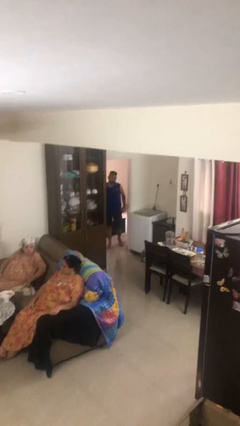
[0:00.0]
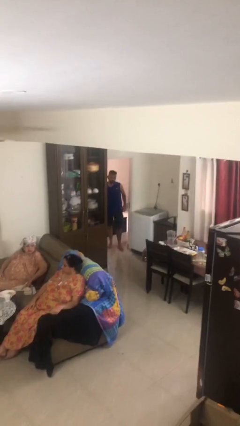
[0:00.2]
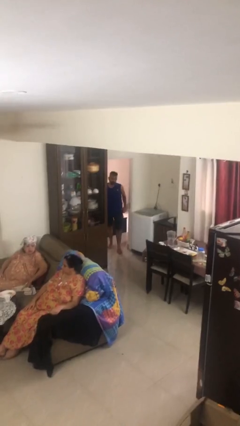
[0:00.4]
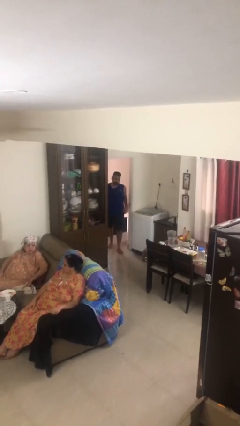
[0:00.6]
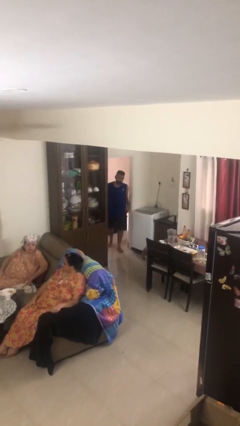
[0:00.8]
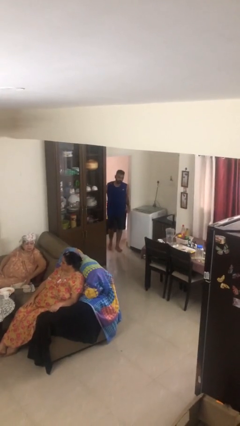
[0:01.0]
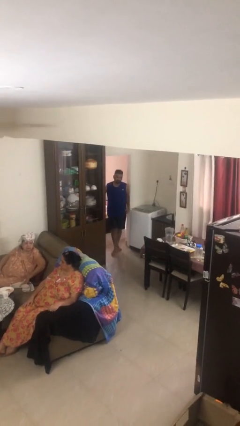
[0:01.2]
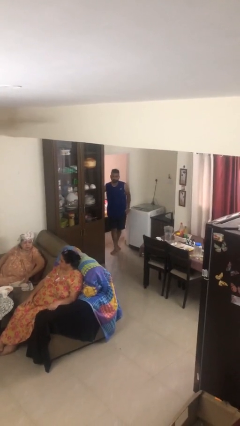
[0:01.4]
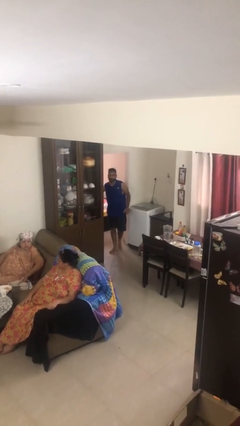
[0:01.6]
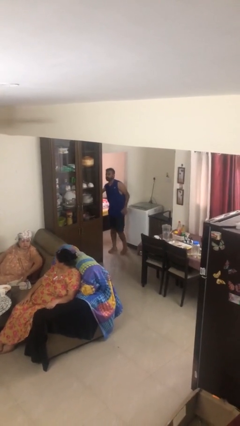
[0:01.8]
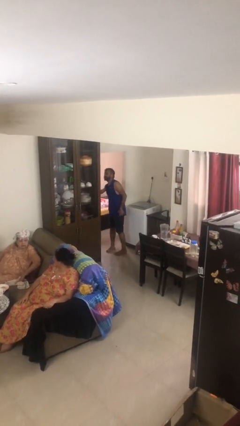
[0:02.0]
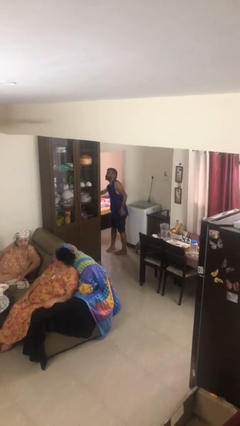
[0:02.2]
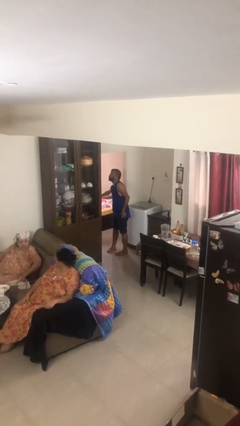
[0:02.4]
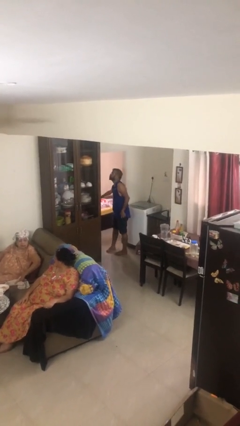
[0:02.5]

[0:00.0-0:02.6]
person enters scene through structure

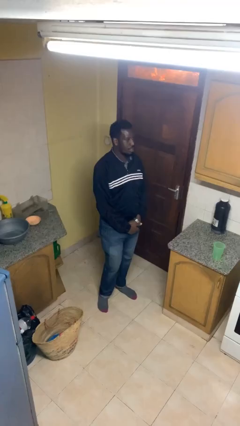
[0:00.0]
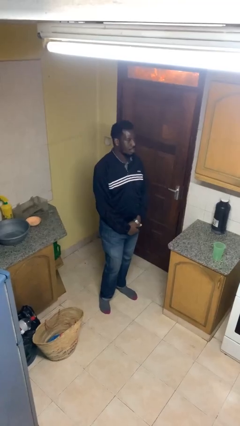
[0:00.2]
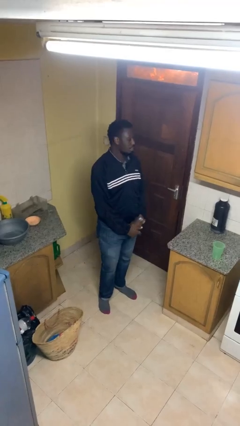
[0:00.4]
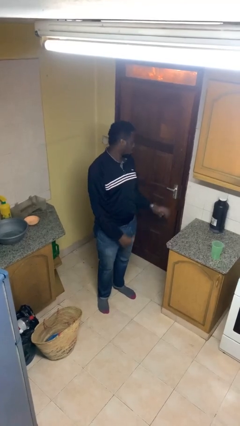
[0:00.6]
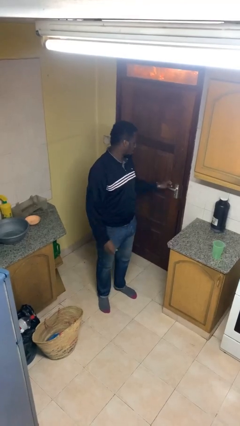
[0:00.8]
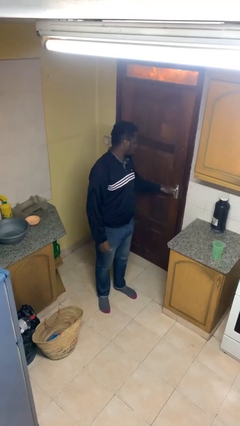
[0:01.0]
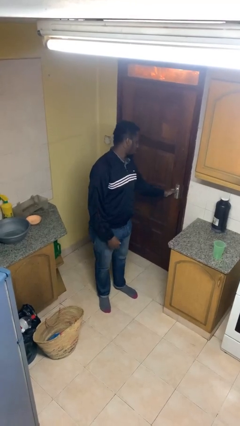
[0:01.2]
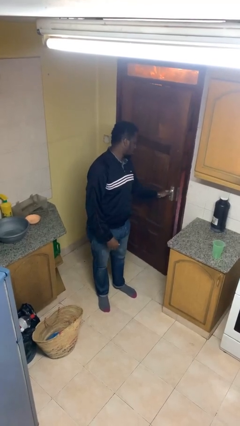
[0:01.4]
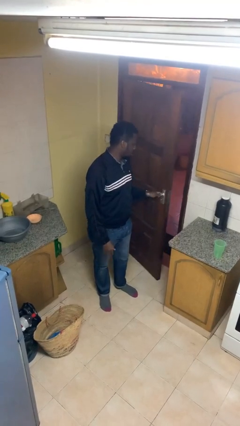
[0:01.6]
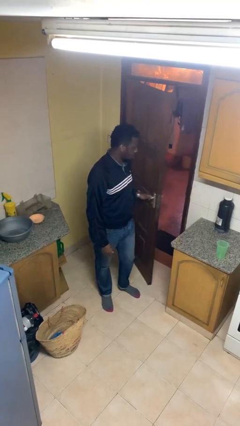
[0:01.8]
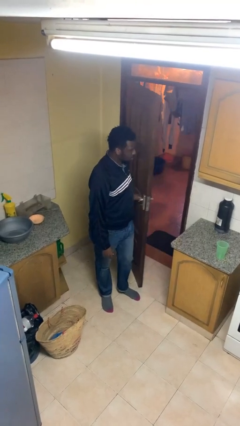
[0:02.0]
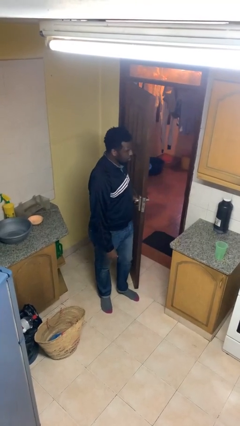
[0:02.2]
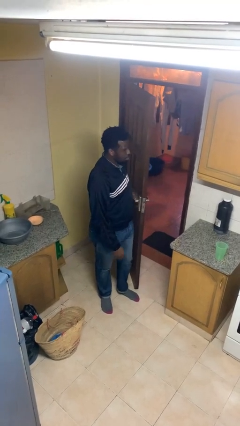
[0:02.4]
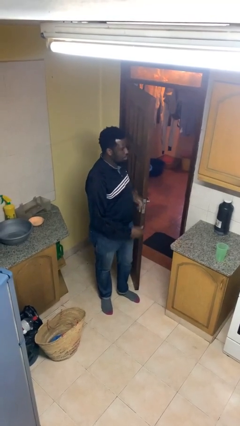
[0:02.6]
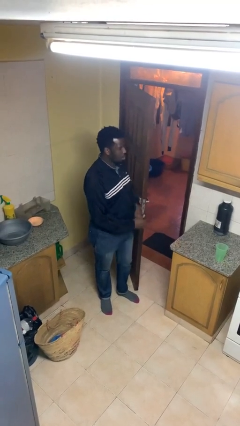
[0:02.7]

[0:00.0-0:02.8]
person opens facility door

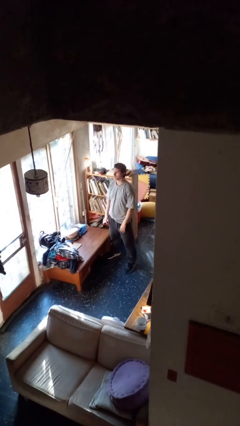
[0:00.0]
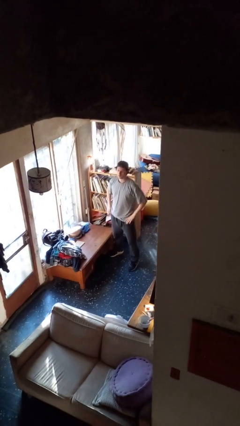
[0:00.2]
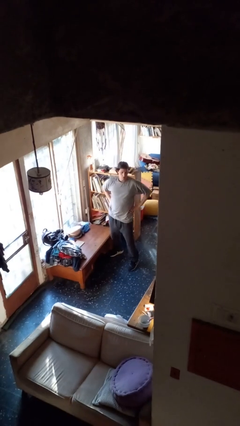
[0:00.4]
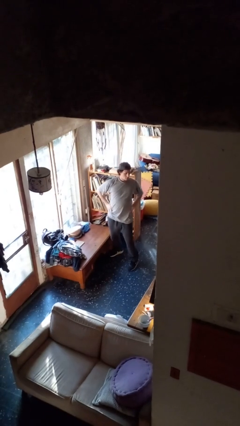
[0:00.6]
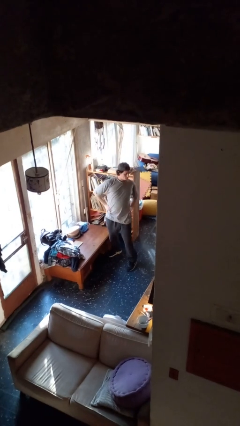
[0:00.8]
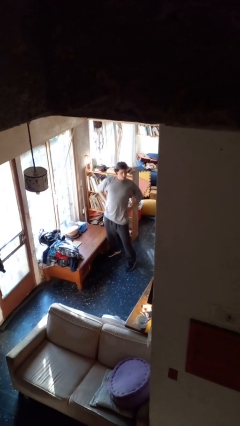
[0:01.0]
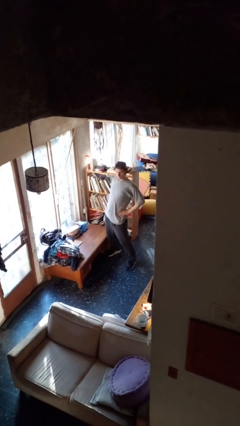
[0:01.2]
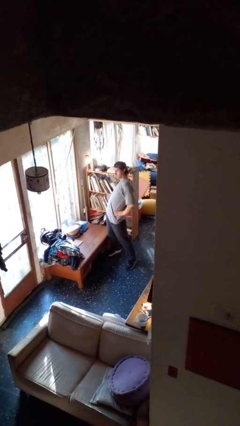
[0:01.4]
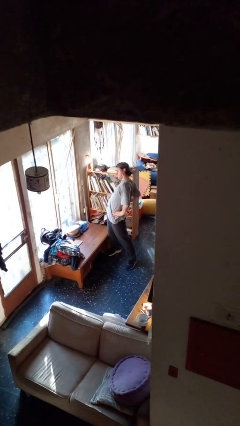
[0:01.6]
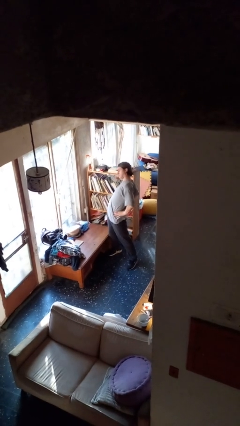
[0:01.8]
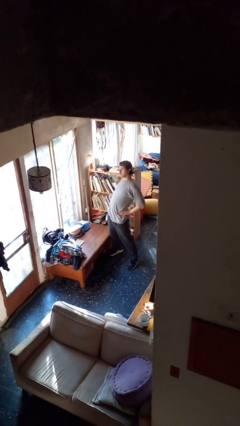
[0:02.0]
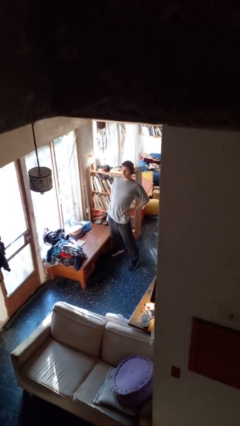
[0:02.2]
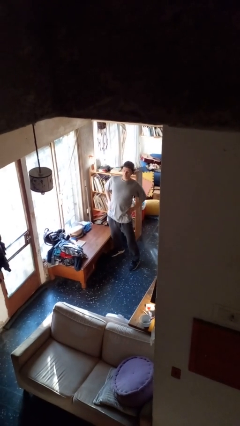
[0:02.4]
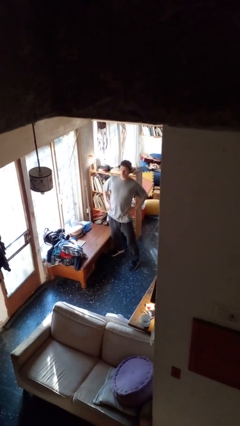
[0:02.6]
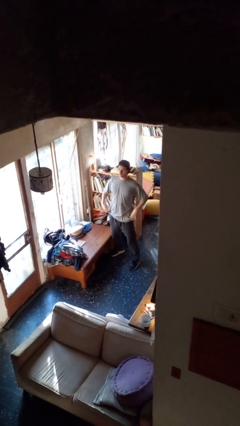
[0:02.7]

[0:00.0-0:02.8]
person stretches back

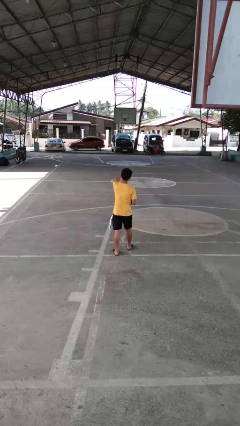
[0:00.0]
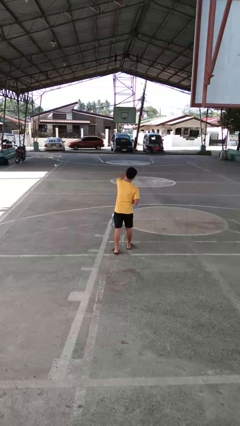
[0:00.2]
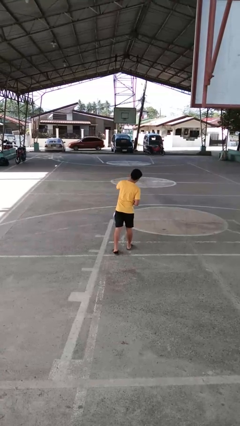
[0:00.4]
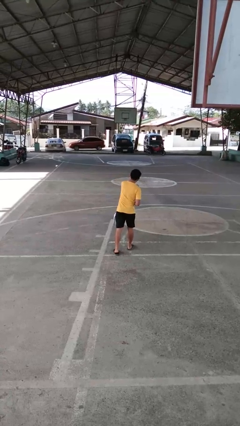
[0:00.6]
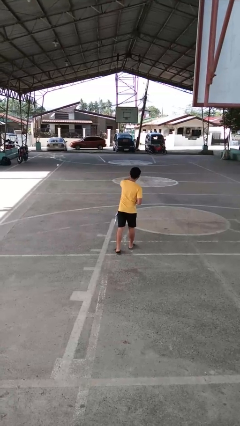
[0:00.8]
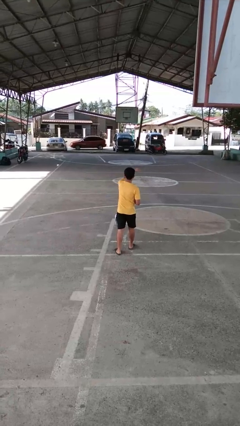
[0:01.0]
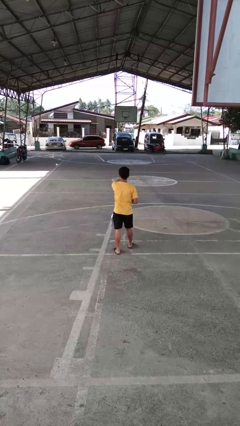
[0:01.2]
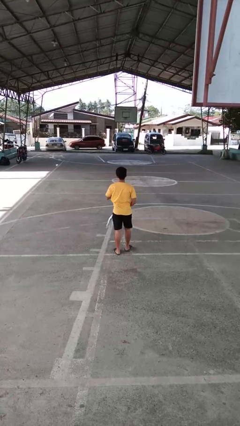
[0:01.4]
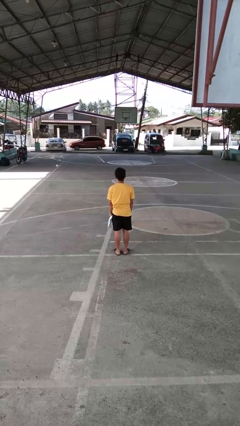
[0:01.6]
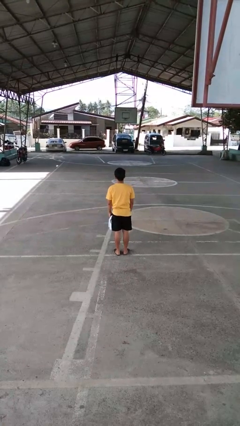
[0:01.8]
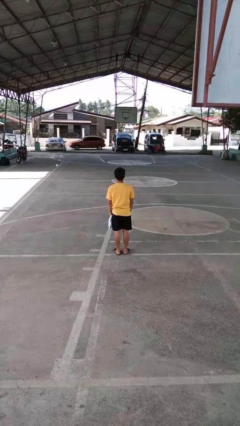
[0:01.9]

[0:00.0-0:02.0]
person punches

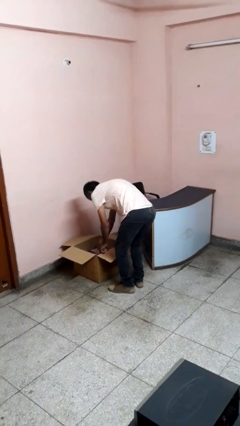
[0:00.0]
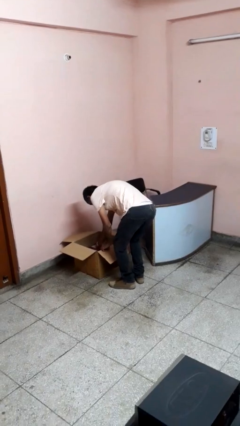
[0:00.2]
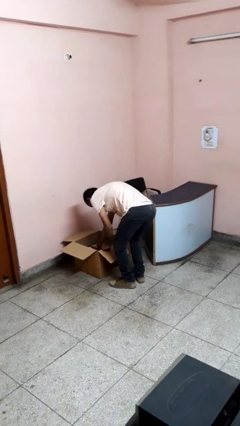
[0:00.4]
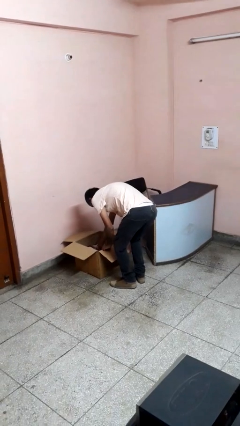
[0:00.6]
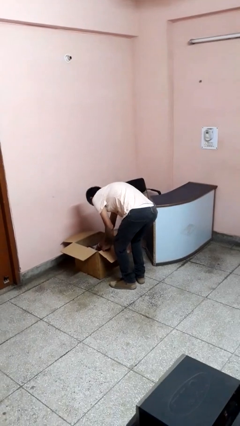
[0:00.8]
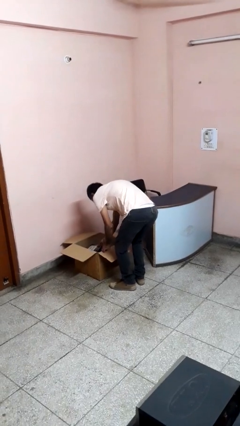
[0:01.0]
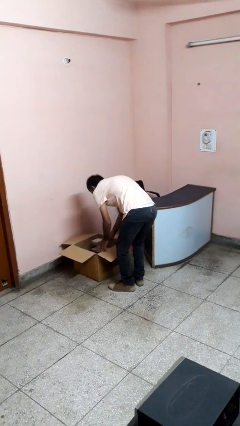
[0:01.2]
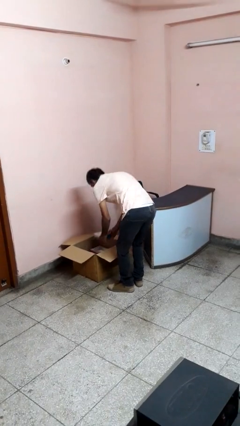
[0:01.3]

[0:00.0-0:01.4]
person takes object from box

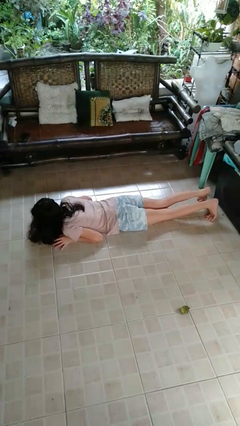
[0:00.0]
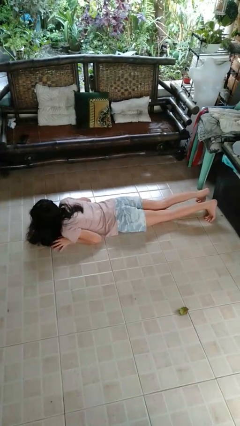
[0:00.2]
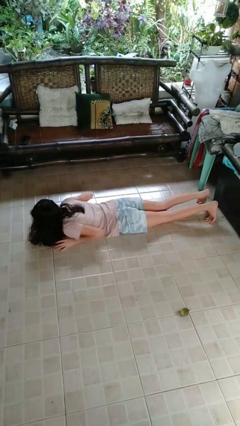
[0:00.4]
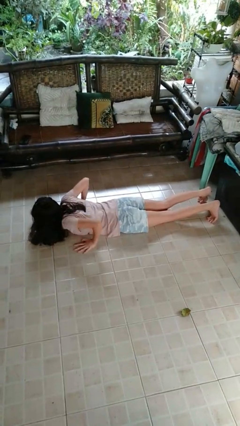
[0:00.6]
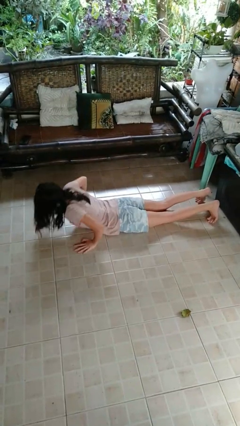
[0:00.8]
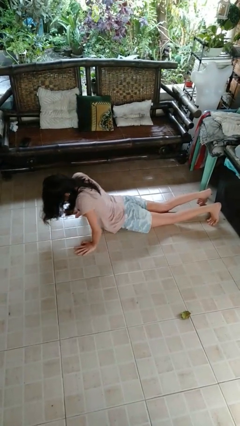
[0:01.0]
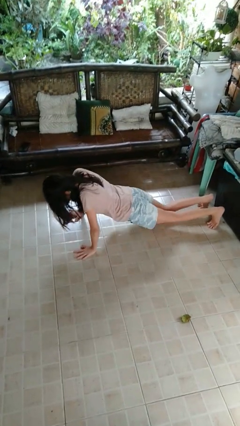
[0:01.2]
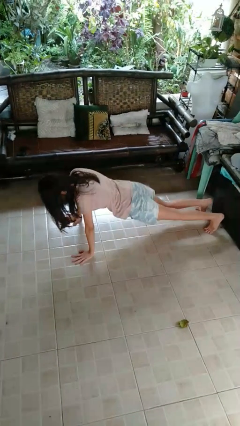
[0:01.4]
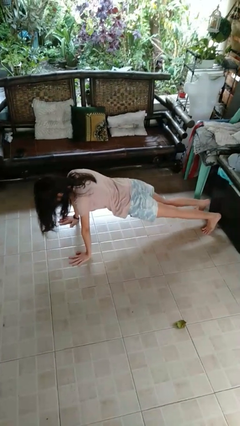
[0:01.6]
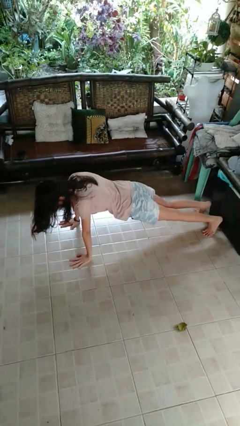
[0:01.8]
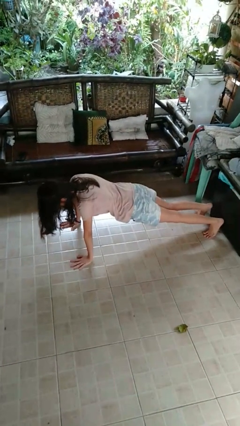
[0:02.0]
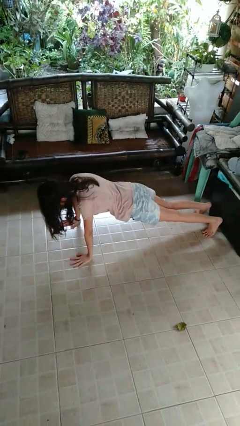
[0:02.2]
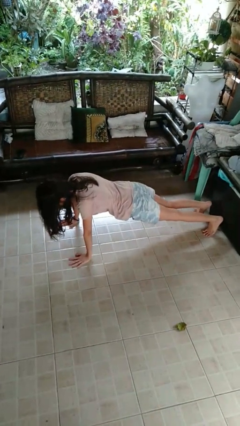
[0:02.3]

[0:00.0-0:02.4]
person exercises with pushup

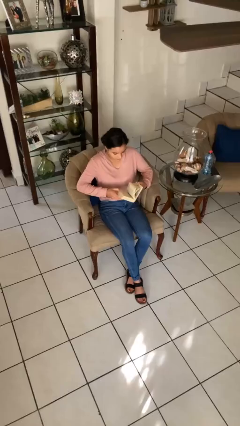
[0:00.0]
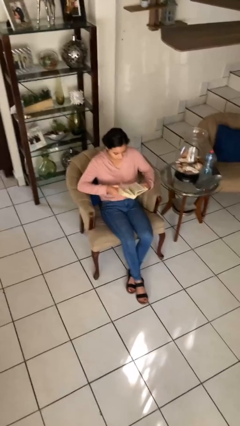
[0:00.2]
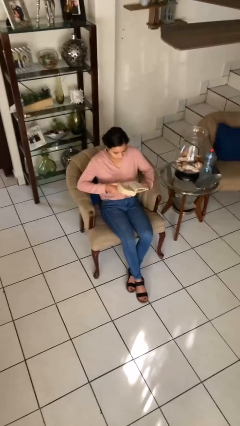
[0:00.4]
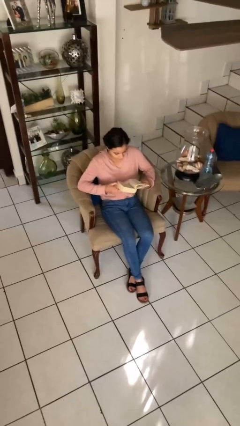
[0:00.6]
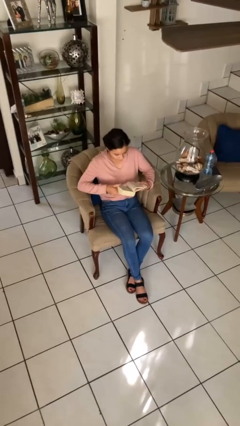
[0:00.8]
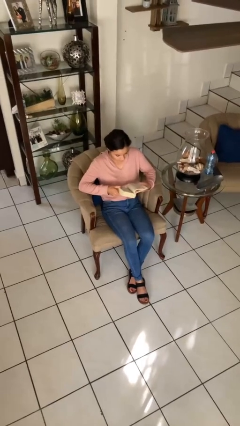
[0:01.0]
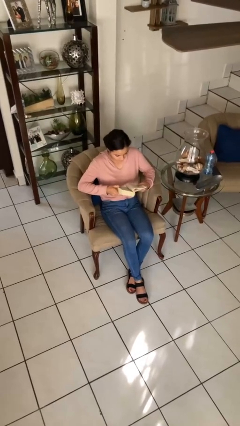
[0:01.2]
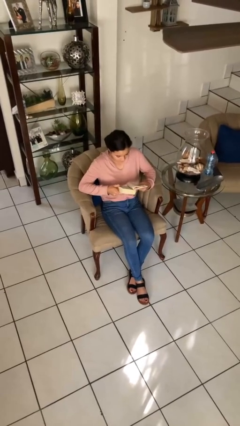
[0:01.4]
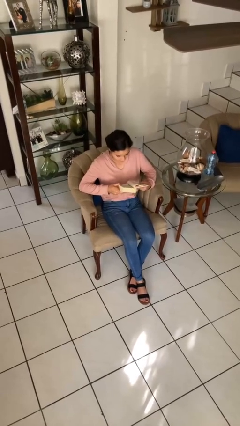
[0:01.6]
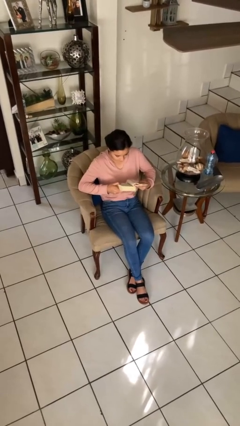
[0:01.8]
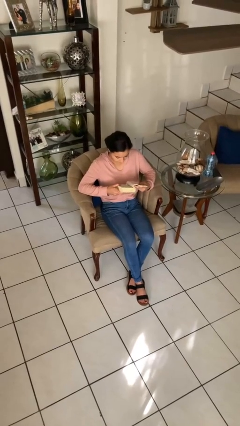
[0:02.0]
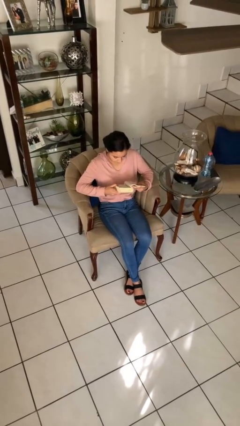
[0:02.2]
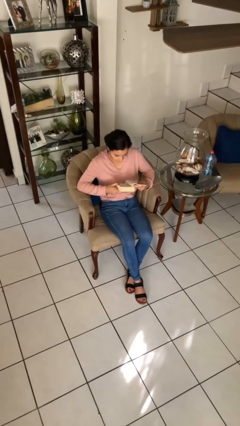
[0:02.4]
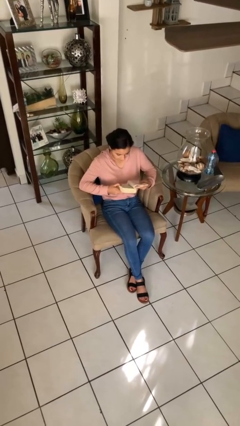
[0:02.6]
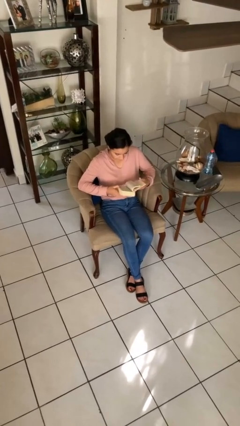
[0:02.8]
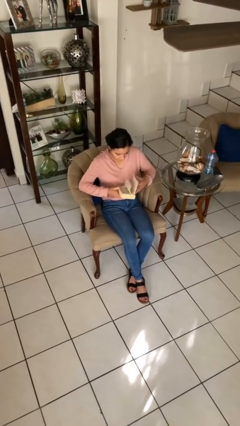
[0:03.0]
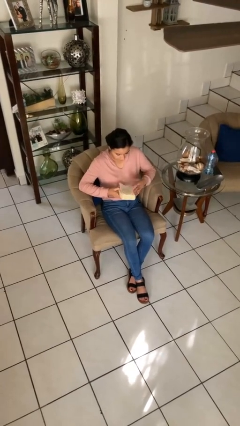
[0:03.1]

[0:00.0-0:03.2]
person reads book

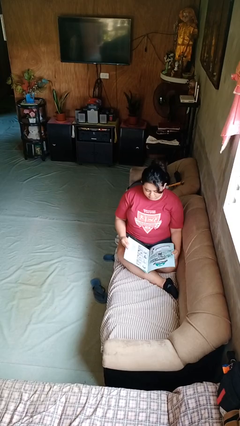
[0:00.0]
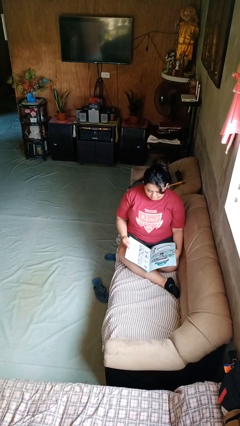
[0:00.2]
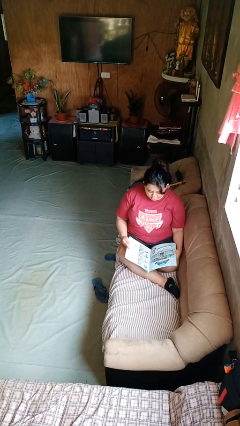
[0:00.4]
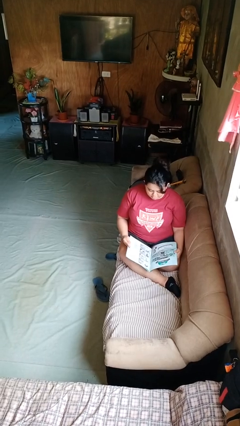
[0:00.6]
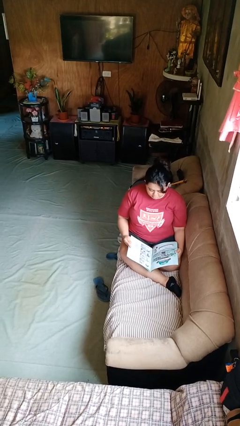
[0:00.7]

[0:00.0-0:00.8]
person reads magazine
